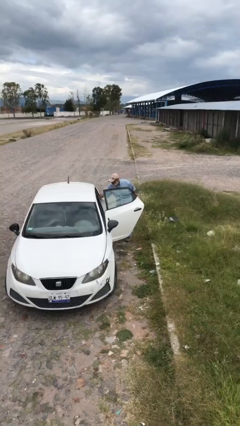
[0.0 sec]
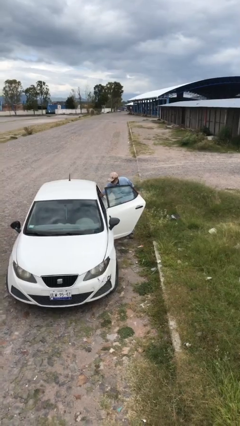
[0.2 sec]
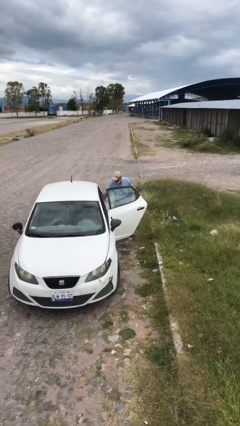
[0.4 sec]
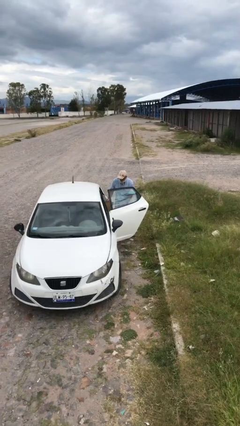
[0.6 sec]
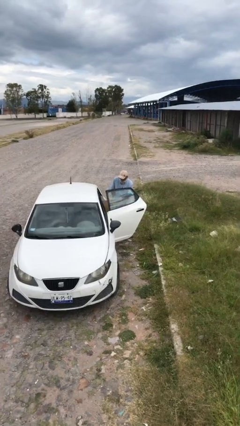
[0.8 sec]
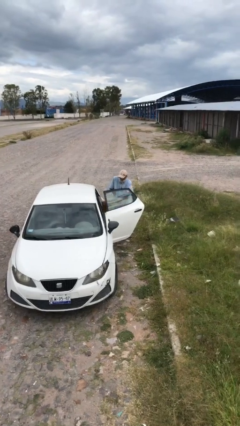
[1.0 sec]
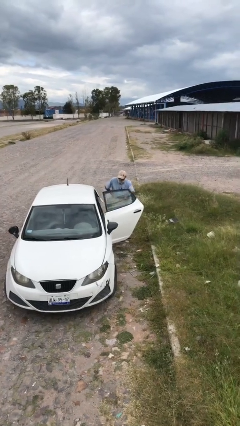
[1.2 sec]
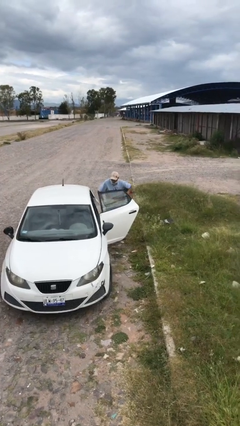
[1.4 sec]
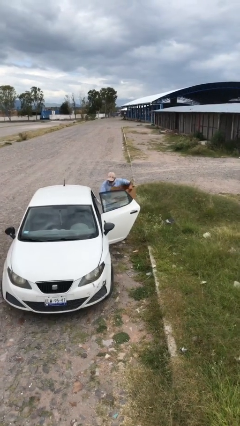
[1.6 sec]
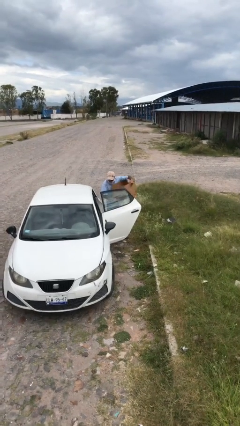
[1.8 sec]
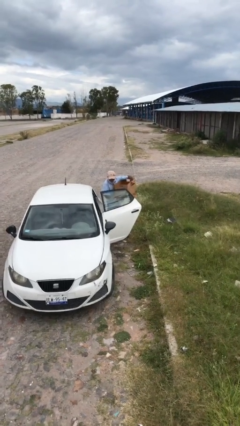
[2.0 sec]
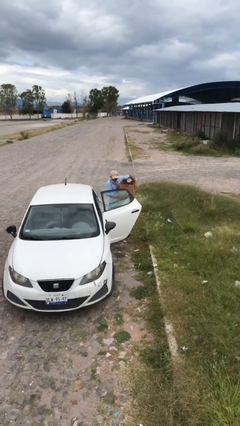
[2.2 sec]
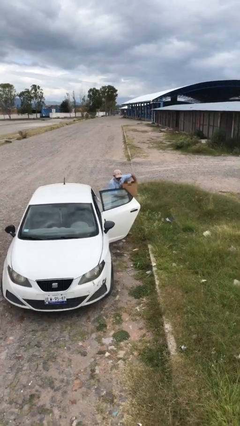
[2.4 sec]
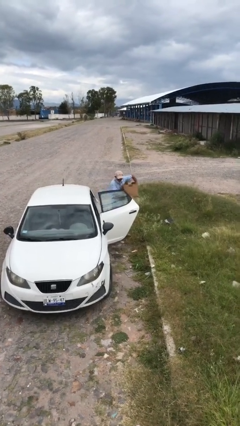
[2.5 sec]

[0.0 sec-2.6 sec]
person unloads car

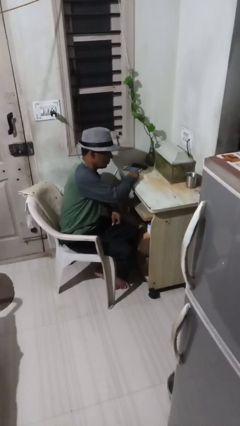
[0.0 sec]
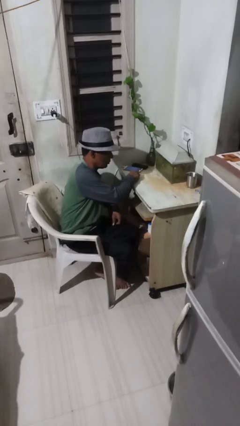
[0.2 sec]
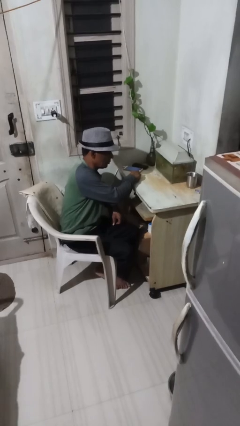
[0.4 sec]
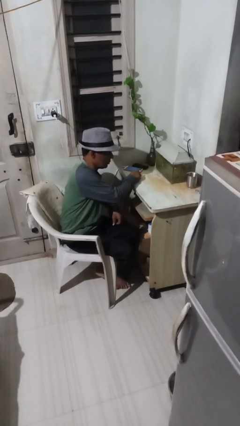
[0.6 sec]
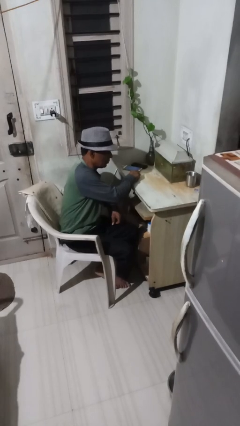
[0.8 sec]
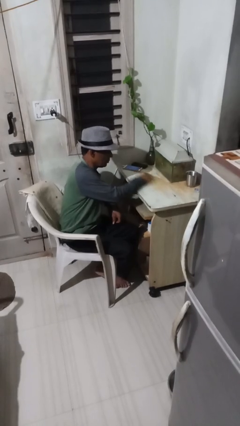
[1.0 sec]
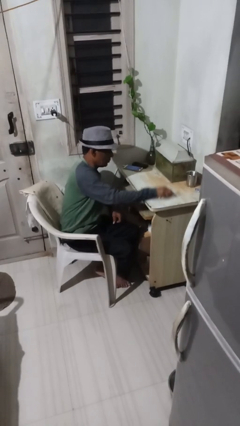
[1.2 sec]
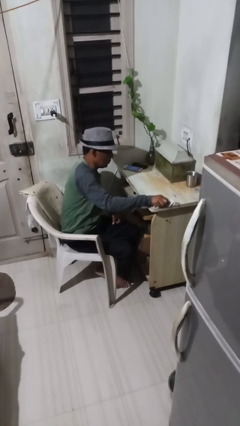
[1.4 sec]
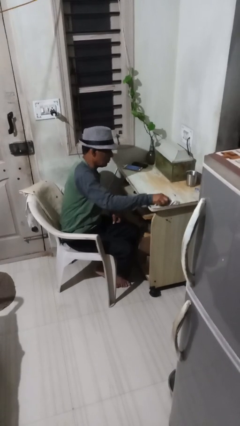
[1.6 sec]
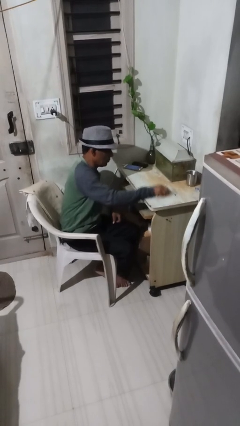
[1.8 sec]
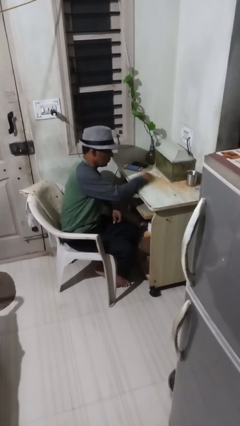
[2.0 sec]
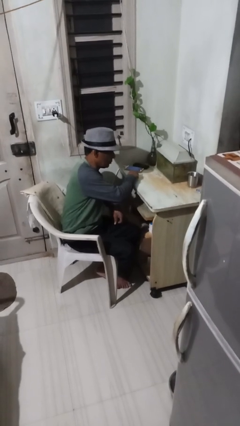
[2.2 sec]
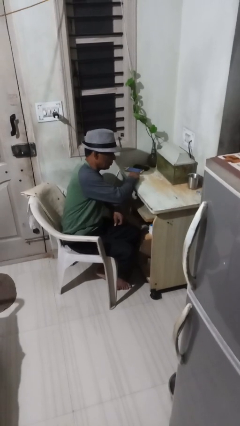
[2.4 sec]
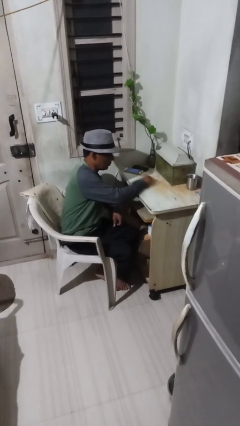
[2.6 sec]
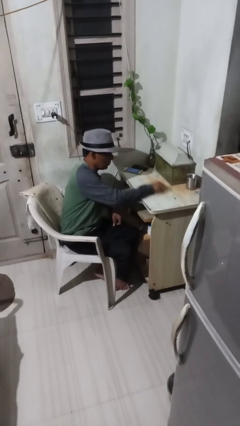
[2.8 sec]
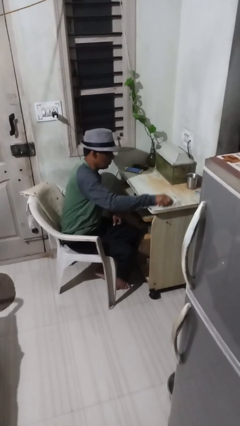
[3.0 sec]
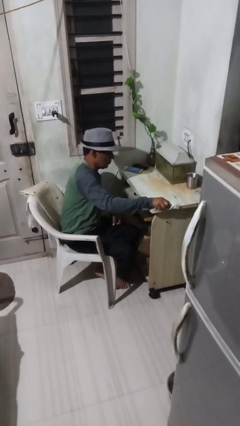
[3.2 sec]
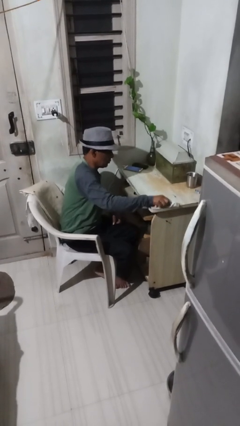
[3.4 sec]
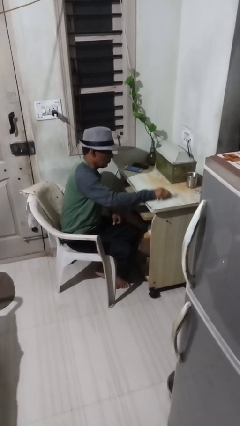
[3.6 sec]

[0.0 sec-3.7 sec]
person cleans table with rag

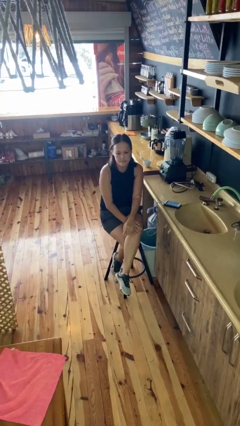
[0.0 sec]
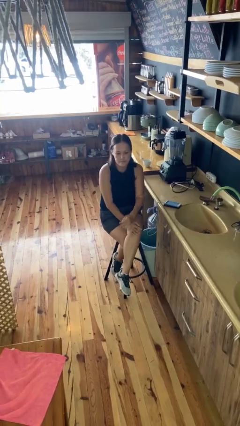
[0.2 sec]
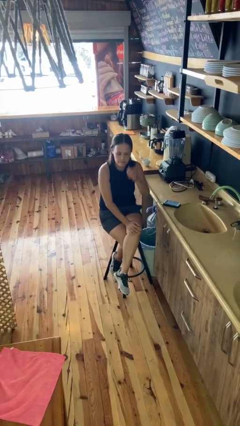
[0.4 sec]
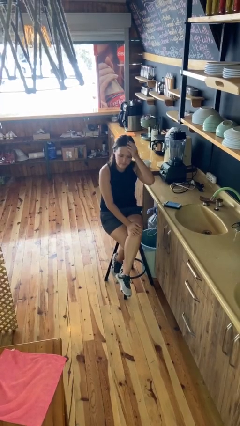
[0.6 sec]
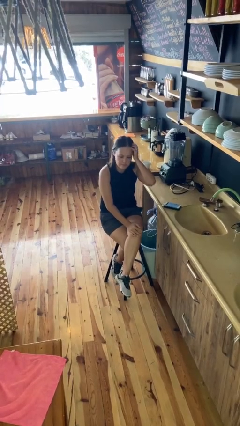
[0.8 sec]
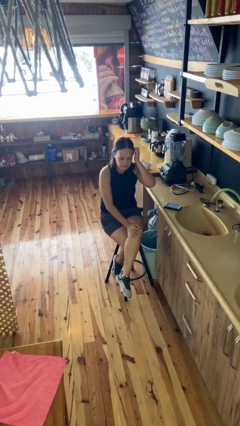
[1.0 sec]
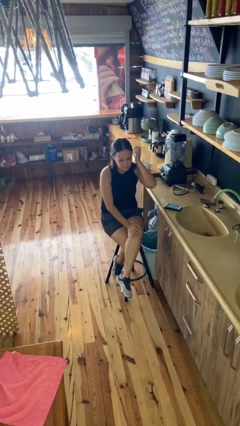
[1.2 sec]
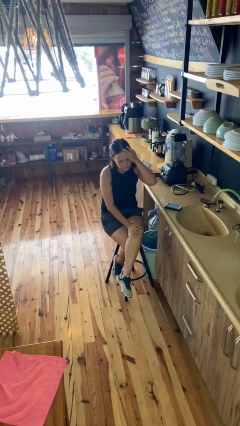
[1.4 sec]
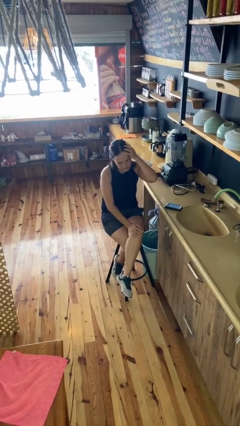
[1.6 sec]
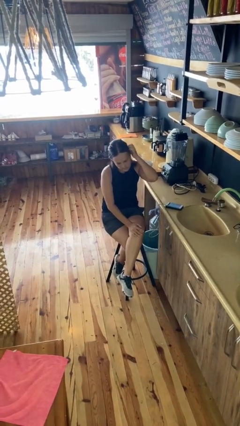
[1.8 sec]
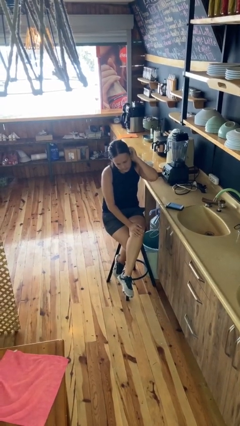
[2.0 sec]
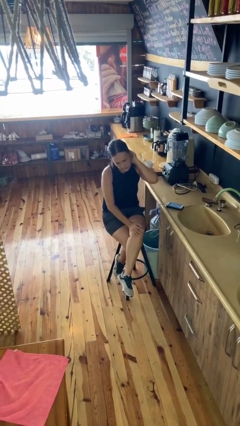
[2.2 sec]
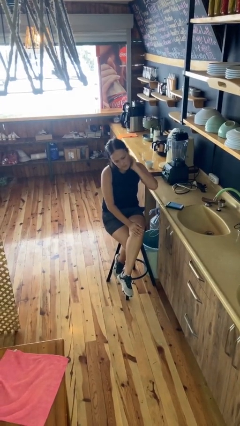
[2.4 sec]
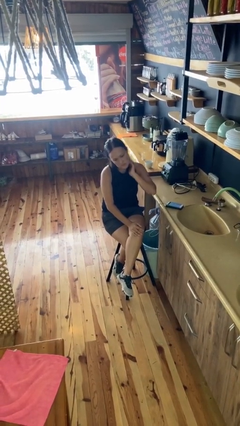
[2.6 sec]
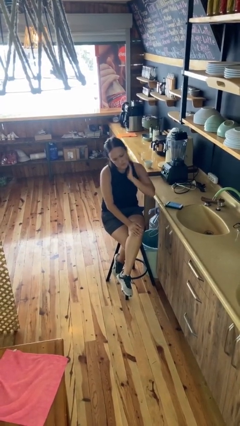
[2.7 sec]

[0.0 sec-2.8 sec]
person strokes hair

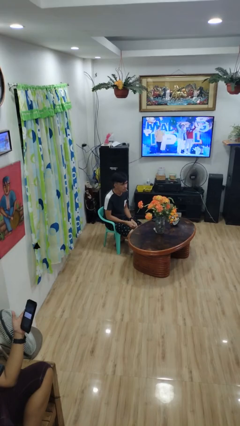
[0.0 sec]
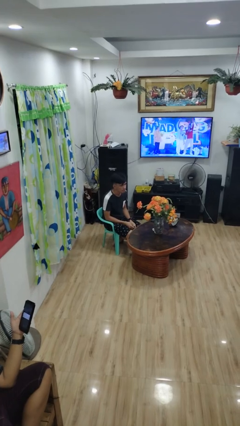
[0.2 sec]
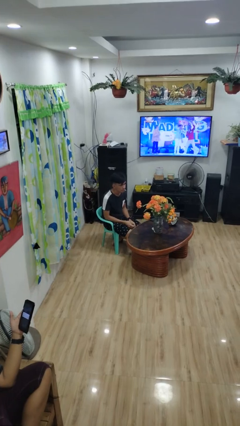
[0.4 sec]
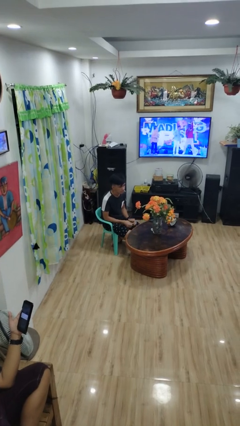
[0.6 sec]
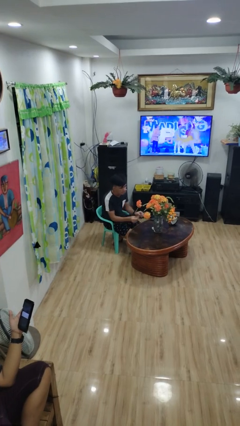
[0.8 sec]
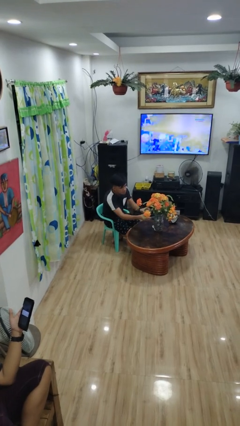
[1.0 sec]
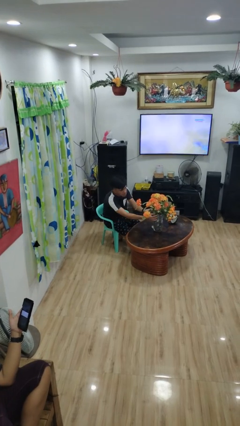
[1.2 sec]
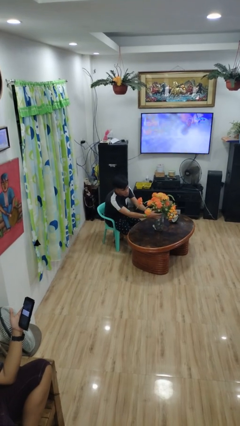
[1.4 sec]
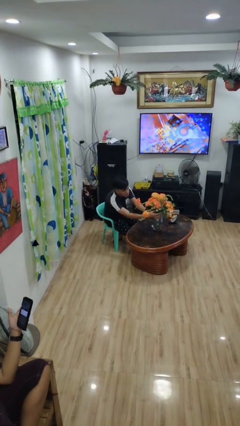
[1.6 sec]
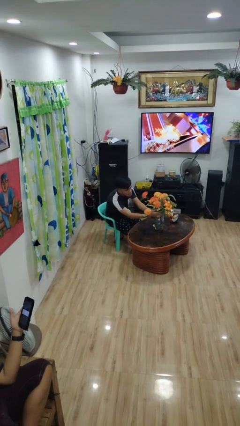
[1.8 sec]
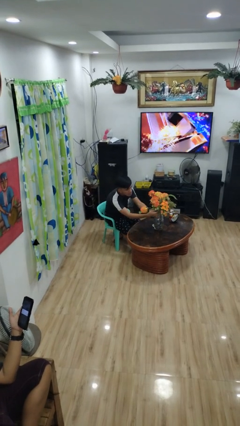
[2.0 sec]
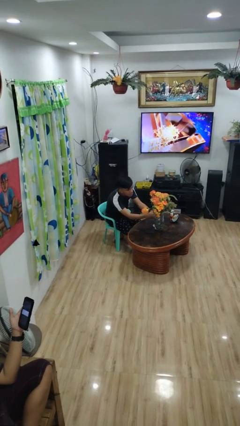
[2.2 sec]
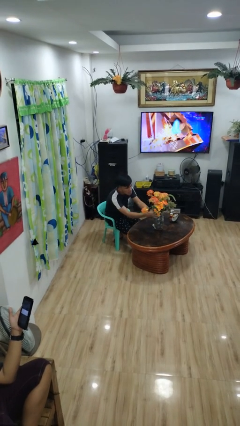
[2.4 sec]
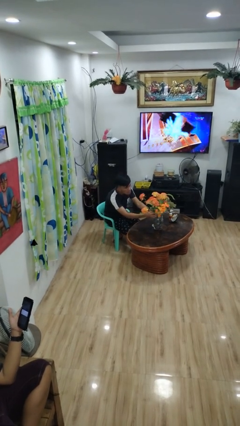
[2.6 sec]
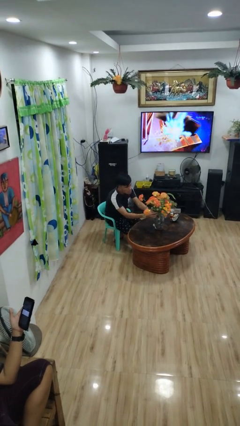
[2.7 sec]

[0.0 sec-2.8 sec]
person arranges flowers in vase

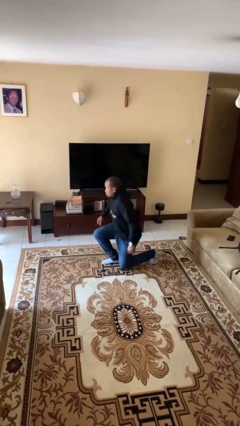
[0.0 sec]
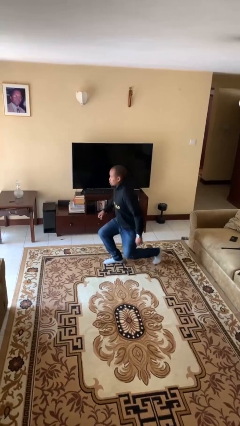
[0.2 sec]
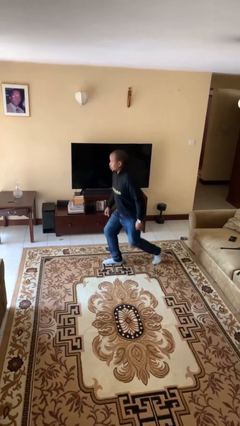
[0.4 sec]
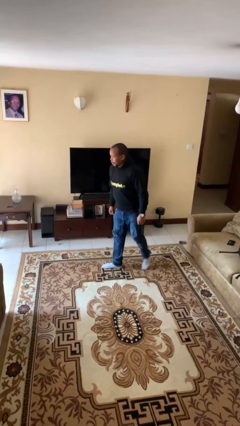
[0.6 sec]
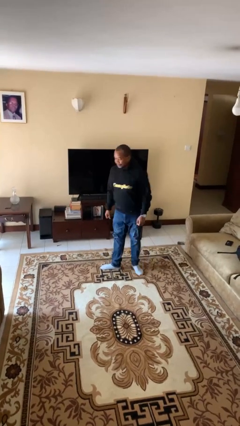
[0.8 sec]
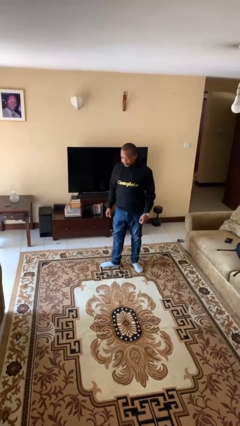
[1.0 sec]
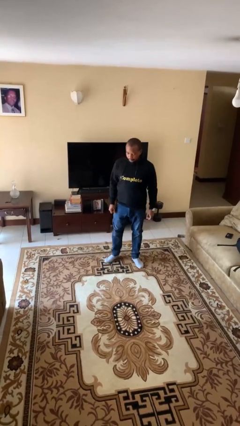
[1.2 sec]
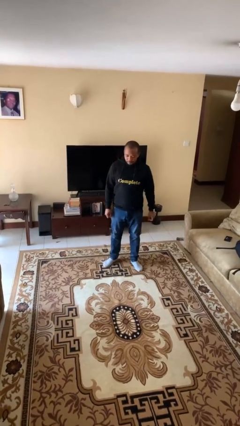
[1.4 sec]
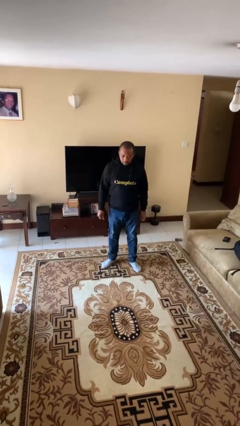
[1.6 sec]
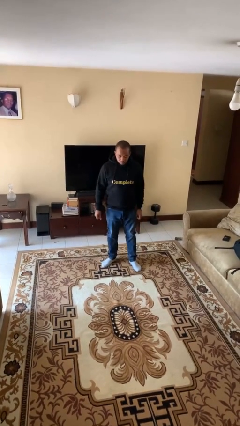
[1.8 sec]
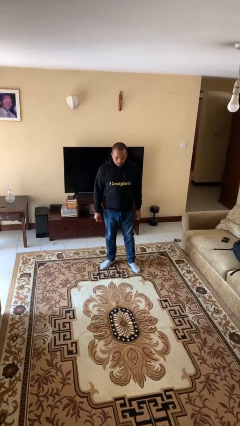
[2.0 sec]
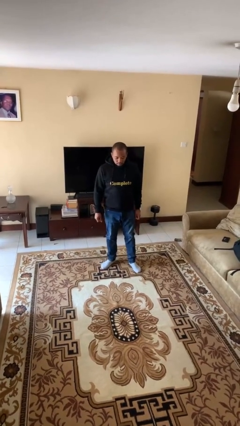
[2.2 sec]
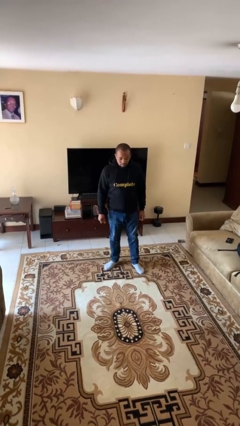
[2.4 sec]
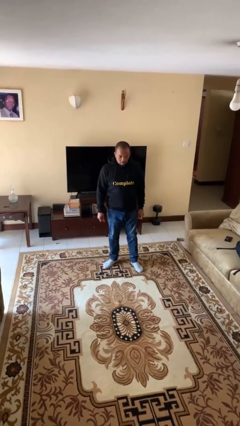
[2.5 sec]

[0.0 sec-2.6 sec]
person stands up from floor

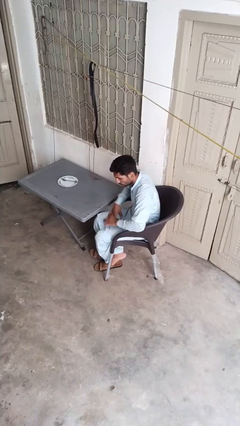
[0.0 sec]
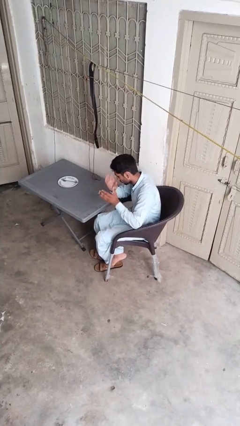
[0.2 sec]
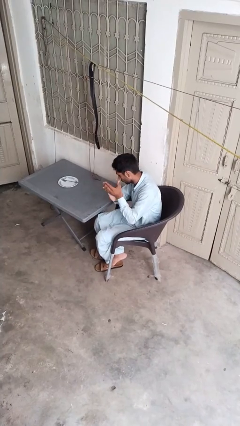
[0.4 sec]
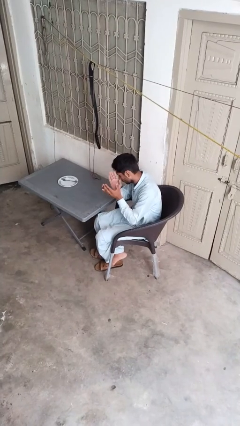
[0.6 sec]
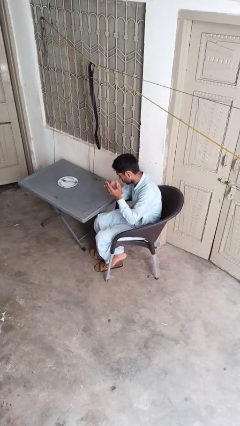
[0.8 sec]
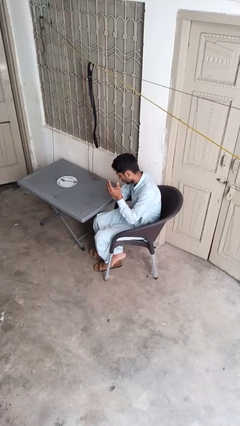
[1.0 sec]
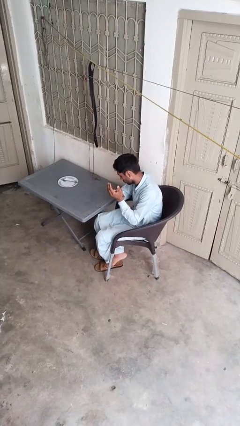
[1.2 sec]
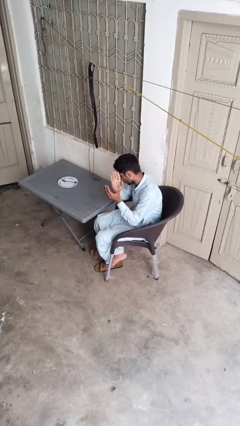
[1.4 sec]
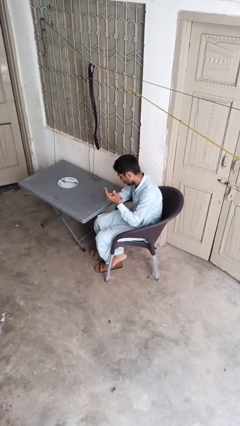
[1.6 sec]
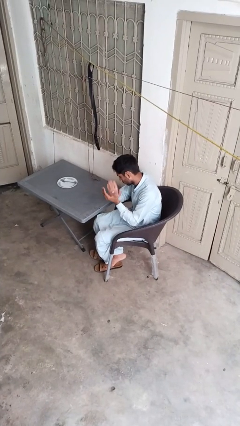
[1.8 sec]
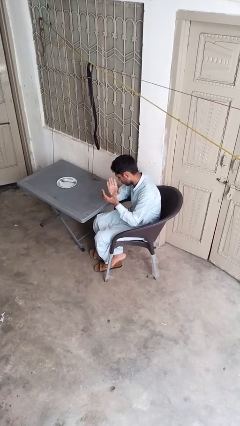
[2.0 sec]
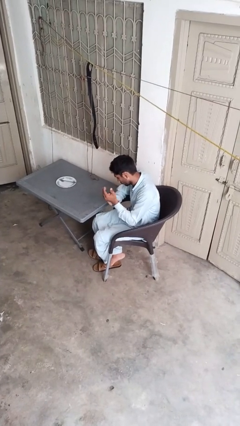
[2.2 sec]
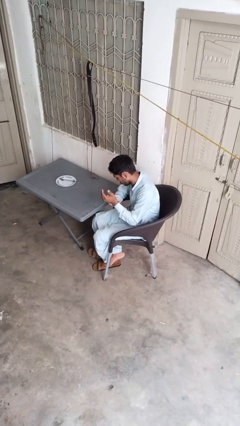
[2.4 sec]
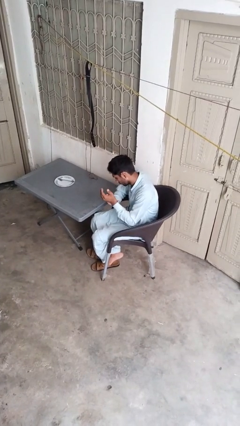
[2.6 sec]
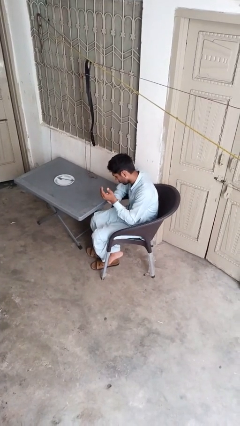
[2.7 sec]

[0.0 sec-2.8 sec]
person claps hands

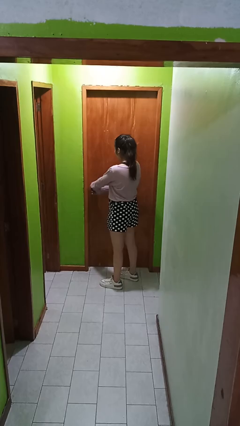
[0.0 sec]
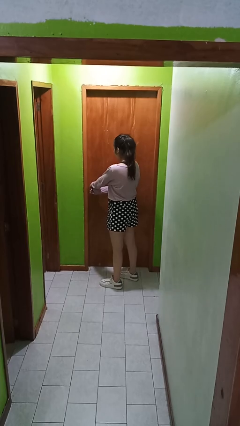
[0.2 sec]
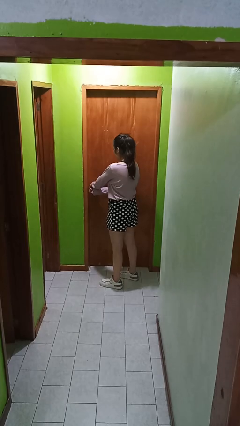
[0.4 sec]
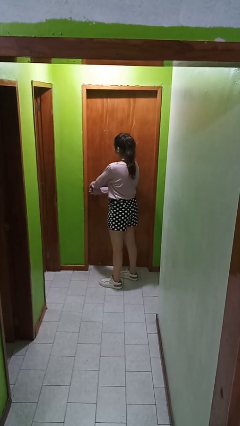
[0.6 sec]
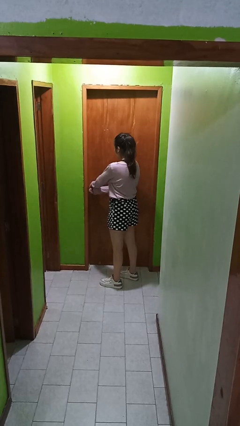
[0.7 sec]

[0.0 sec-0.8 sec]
person unlocks door with keys
